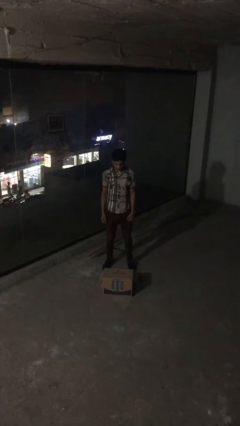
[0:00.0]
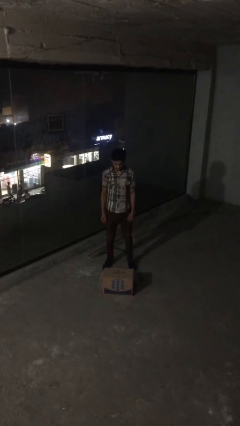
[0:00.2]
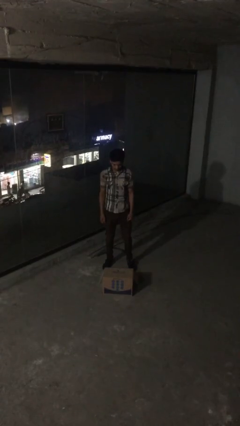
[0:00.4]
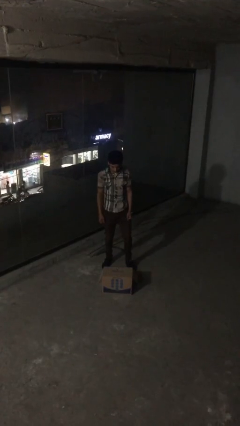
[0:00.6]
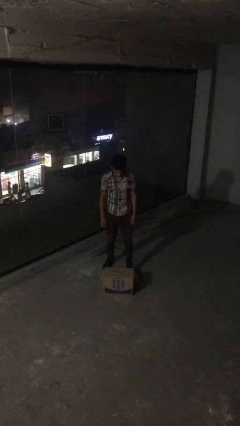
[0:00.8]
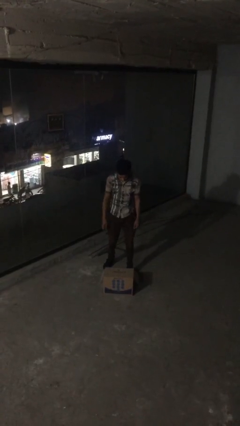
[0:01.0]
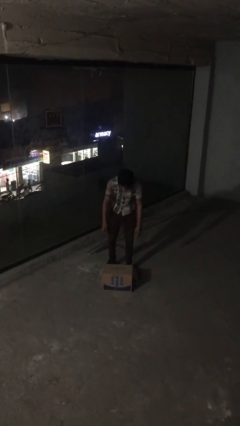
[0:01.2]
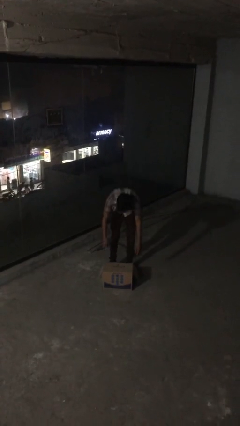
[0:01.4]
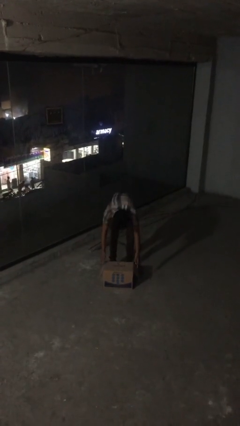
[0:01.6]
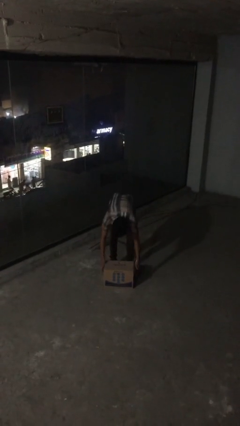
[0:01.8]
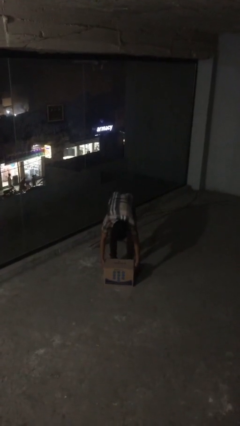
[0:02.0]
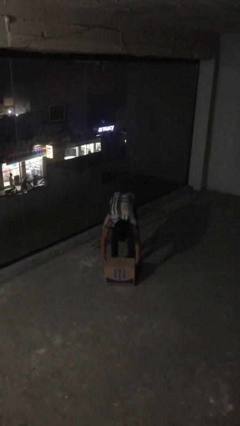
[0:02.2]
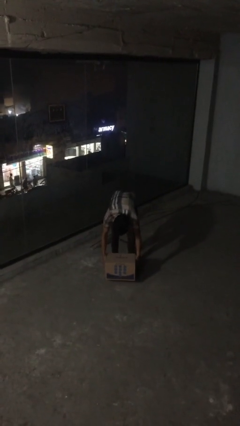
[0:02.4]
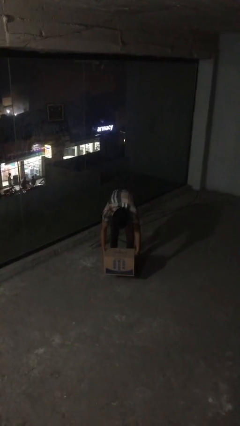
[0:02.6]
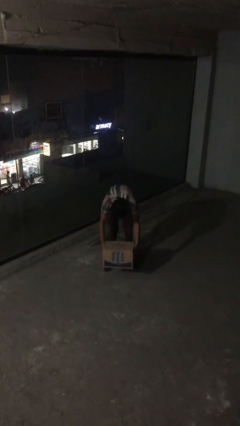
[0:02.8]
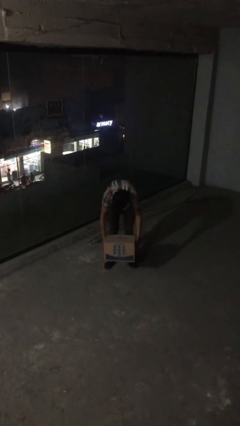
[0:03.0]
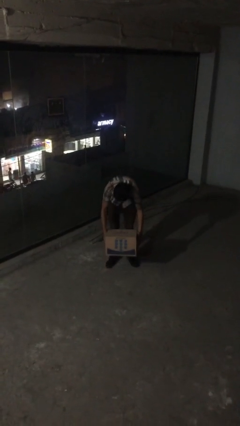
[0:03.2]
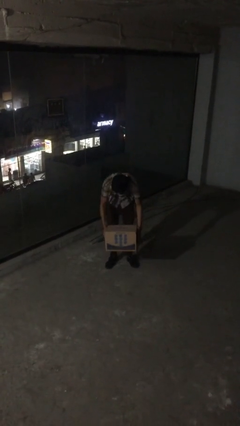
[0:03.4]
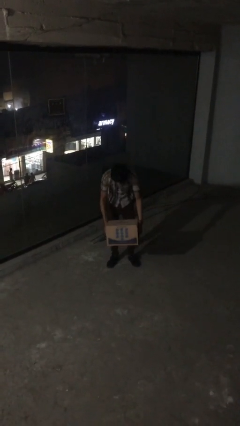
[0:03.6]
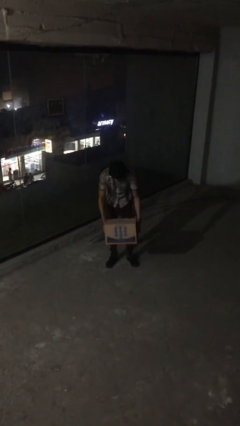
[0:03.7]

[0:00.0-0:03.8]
person picks up object from floor

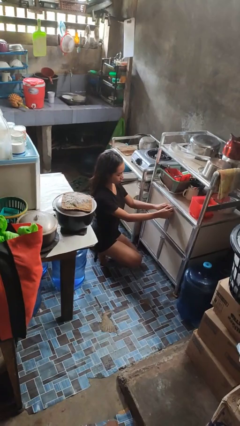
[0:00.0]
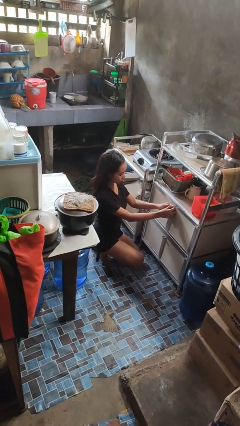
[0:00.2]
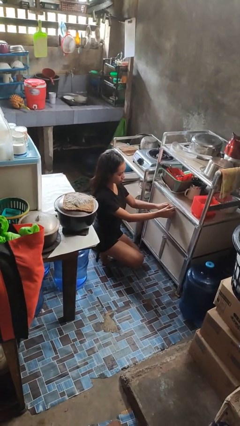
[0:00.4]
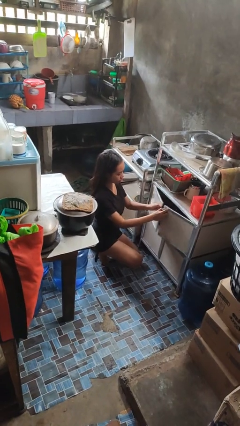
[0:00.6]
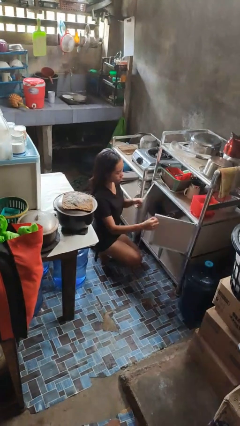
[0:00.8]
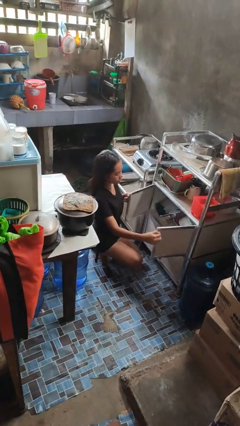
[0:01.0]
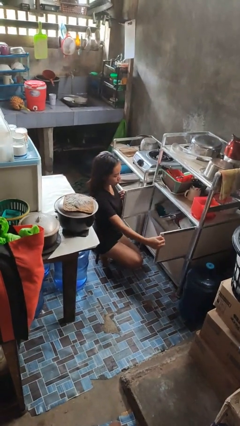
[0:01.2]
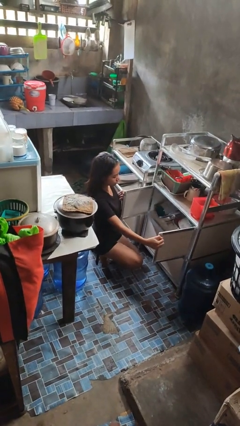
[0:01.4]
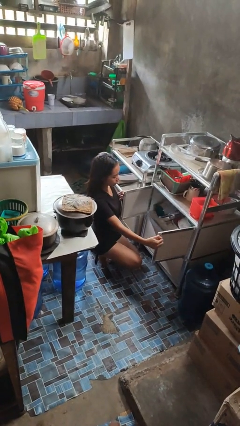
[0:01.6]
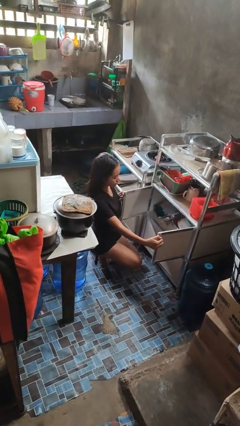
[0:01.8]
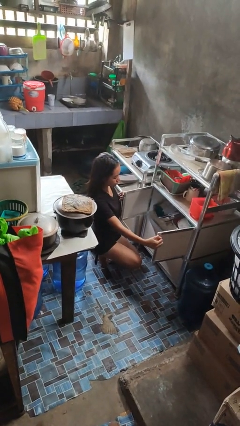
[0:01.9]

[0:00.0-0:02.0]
person opens cabinet

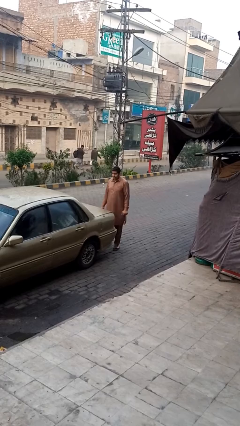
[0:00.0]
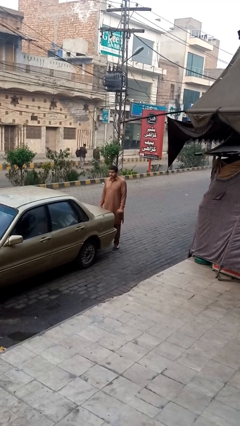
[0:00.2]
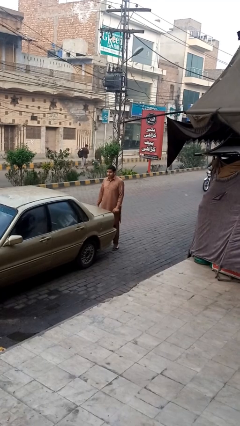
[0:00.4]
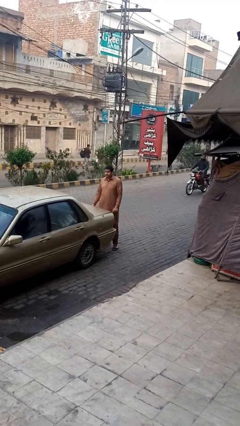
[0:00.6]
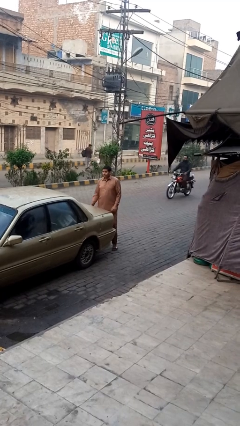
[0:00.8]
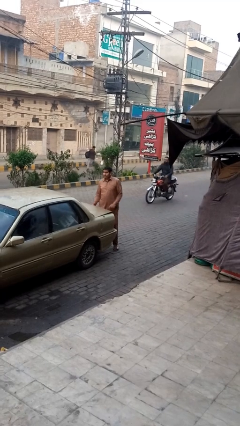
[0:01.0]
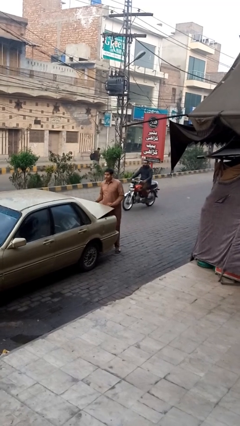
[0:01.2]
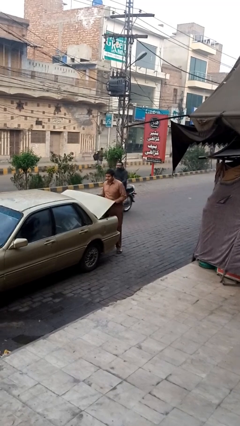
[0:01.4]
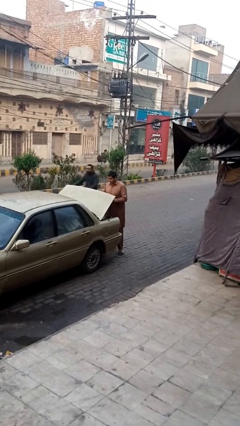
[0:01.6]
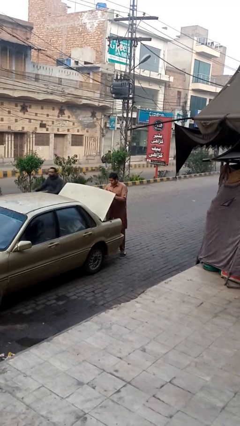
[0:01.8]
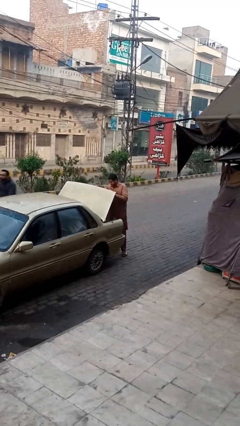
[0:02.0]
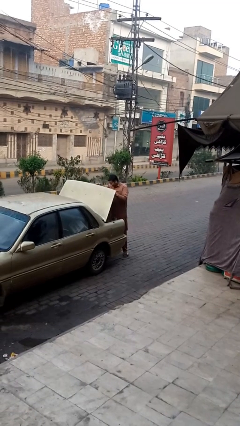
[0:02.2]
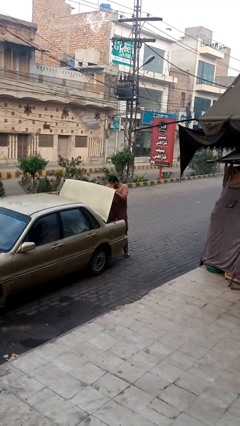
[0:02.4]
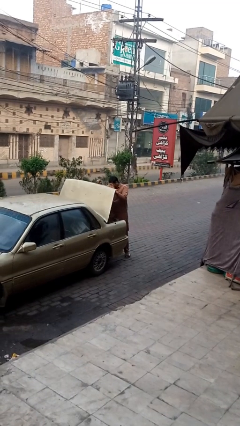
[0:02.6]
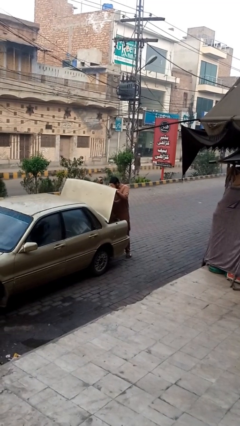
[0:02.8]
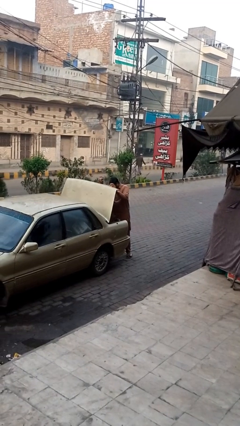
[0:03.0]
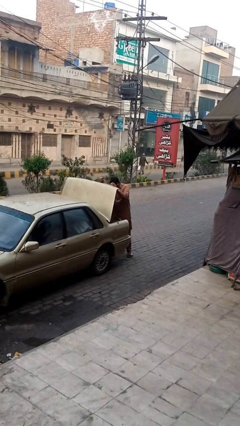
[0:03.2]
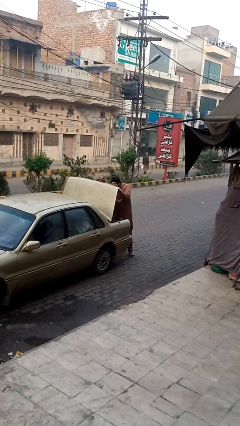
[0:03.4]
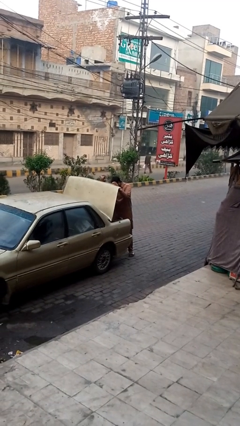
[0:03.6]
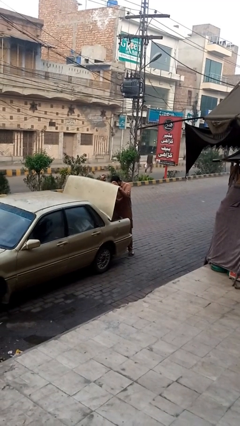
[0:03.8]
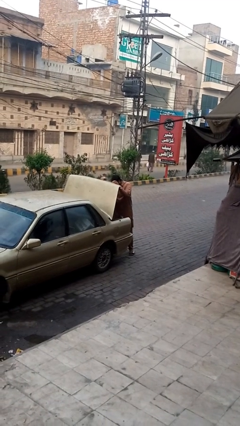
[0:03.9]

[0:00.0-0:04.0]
person opens car trunk

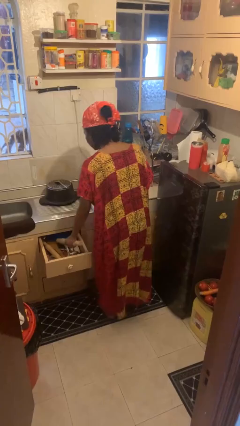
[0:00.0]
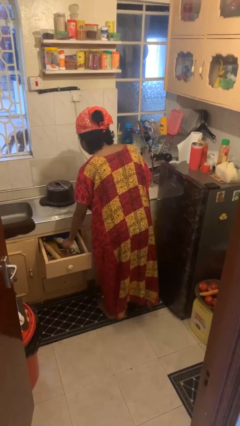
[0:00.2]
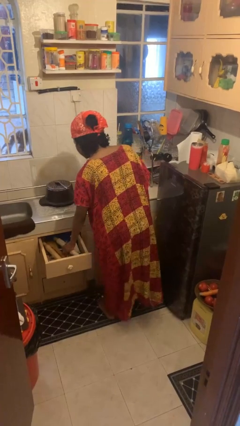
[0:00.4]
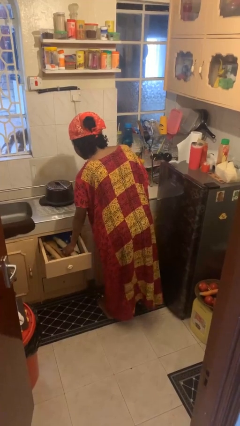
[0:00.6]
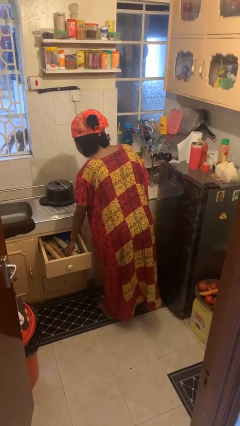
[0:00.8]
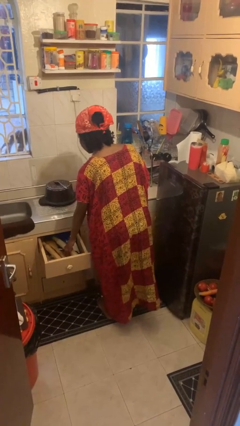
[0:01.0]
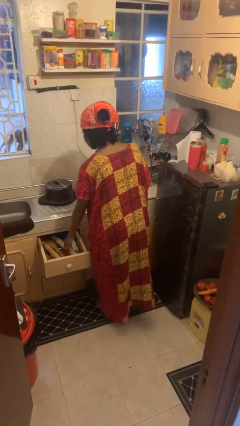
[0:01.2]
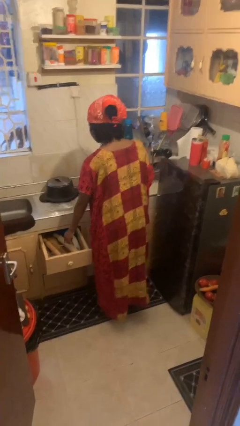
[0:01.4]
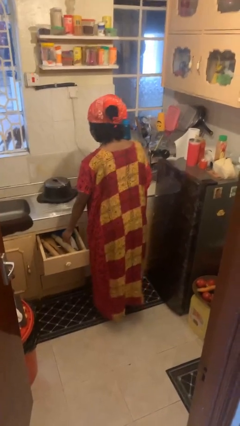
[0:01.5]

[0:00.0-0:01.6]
person puts object into kitchen drawer

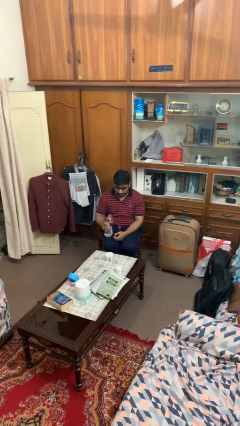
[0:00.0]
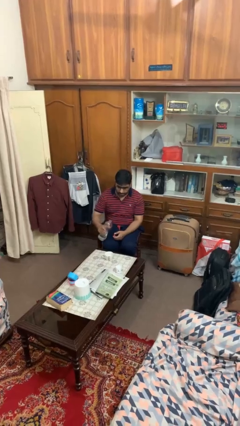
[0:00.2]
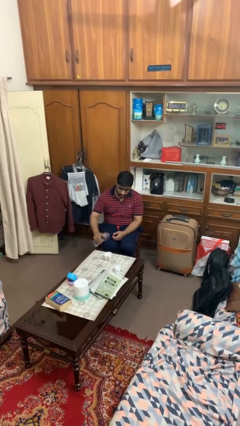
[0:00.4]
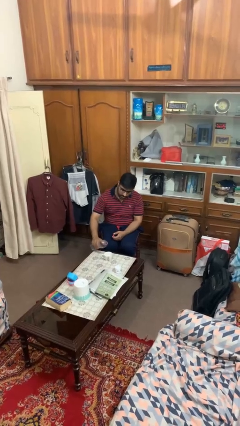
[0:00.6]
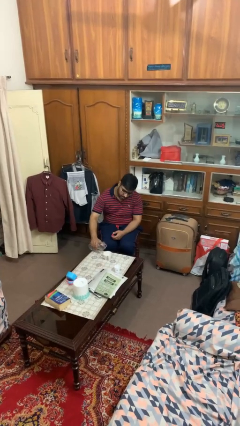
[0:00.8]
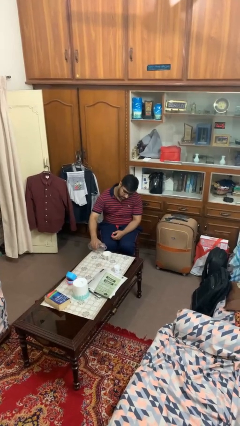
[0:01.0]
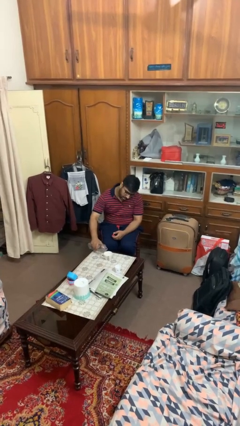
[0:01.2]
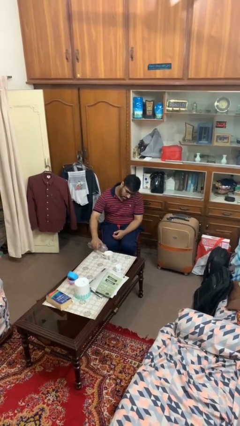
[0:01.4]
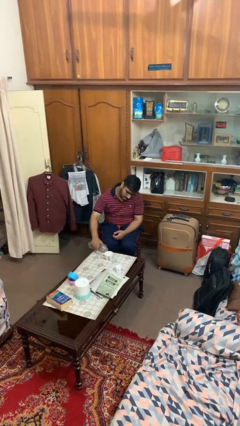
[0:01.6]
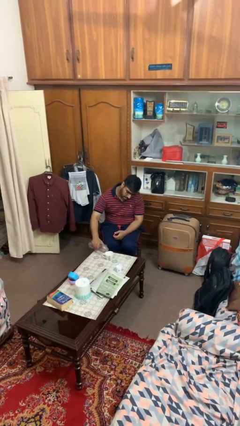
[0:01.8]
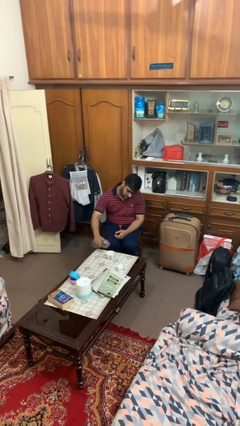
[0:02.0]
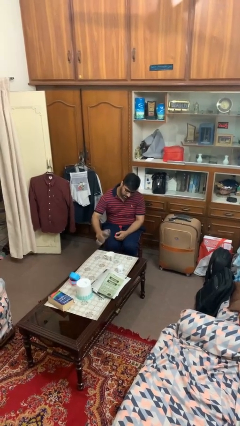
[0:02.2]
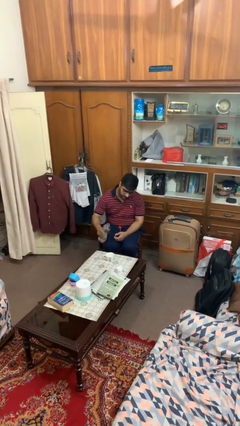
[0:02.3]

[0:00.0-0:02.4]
person pours liquid into cup

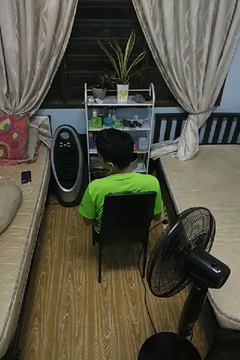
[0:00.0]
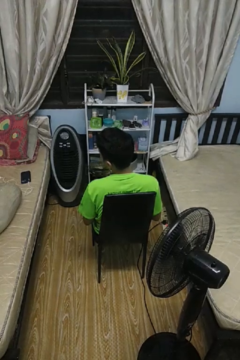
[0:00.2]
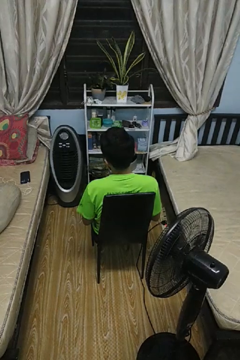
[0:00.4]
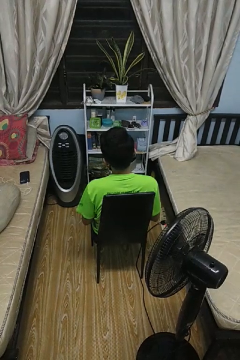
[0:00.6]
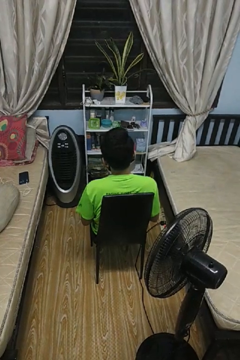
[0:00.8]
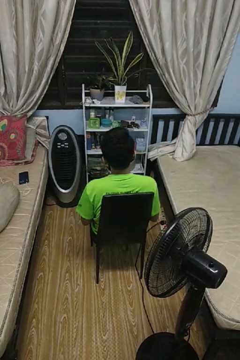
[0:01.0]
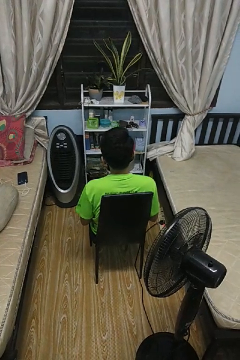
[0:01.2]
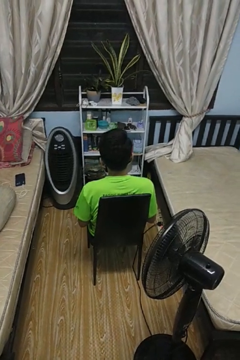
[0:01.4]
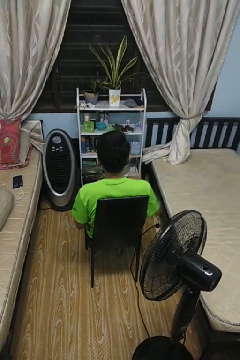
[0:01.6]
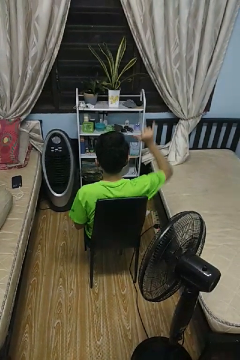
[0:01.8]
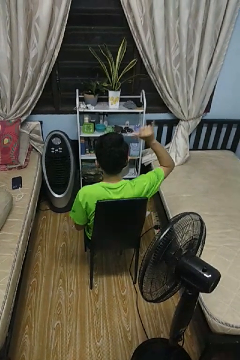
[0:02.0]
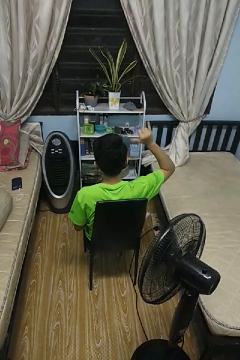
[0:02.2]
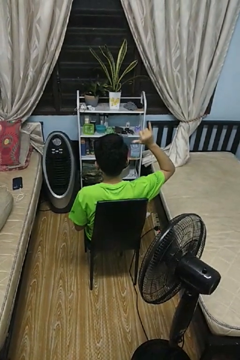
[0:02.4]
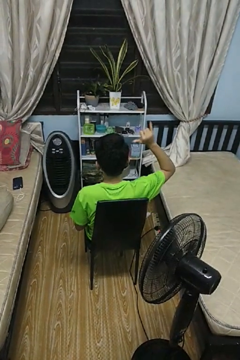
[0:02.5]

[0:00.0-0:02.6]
person gestures hang loose

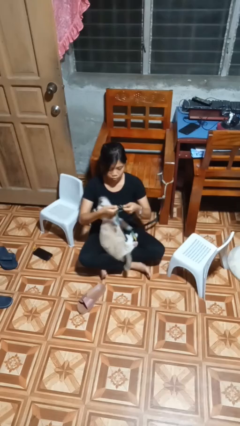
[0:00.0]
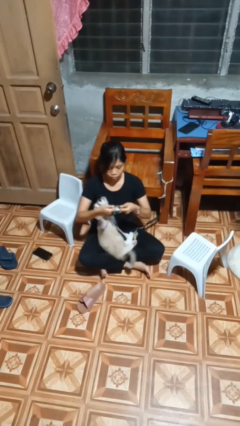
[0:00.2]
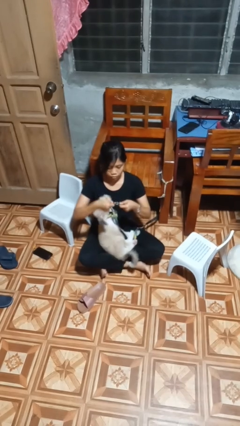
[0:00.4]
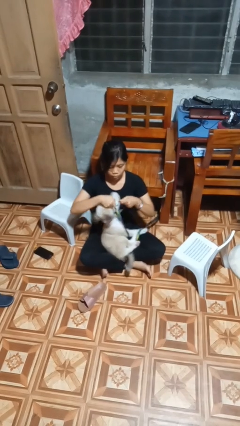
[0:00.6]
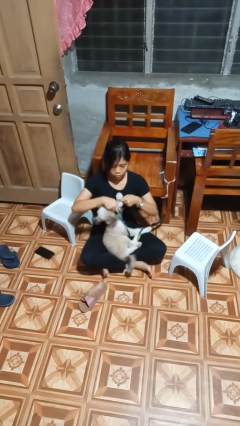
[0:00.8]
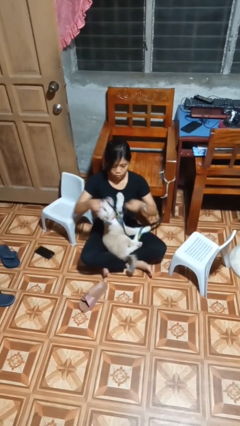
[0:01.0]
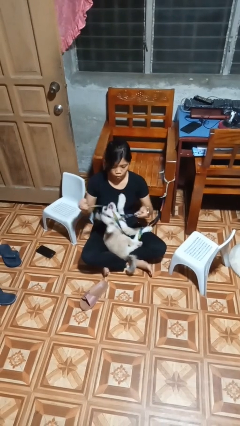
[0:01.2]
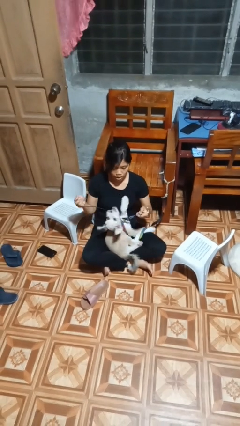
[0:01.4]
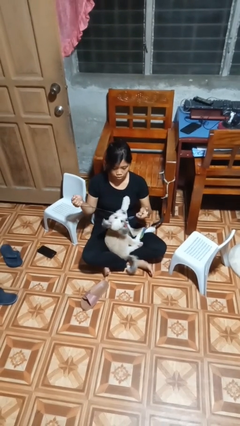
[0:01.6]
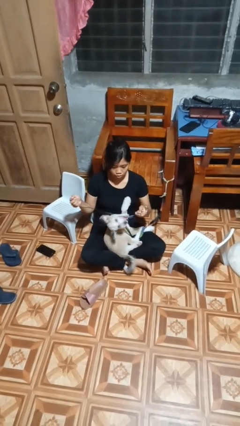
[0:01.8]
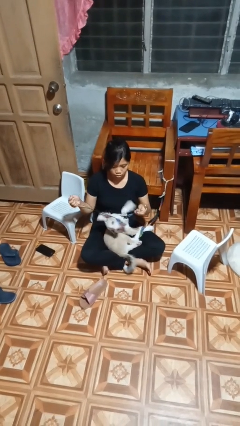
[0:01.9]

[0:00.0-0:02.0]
person unattaches leash from dog
